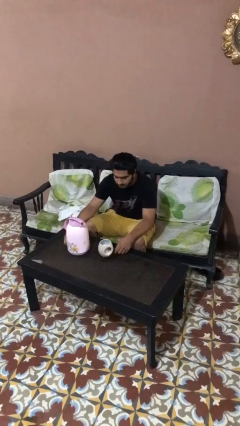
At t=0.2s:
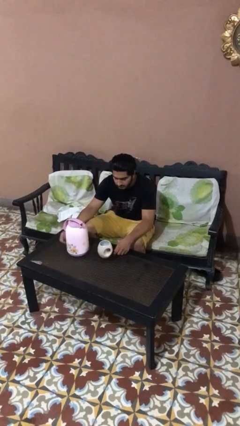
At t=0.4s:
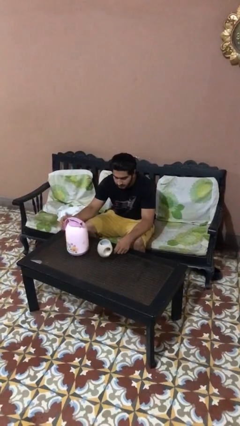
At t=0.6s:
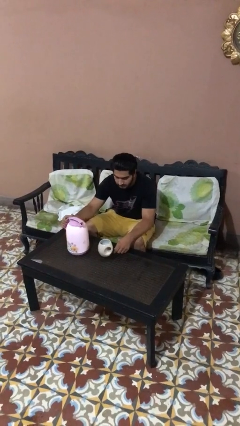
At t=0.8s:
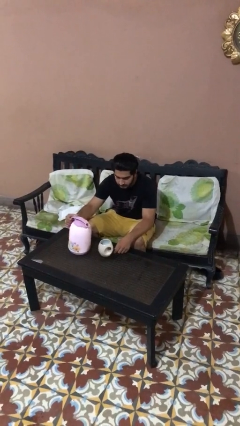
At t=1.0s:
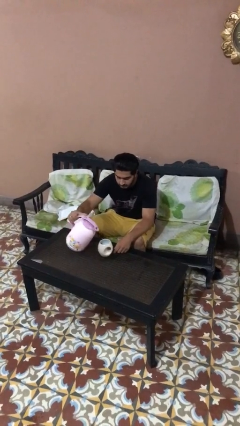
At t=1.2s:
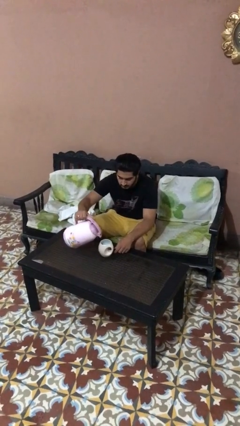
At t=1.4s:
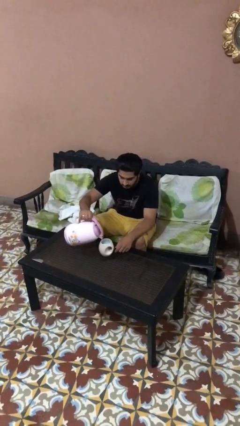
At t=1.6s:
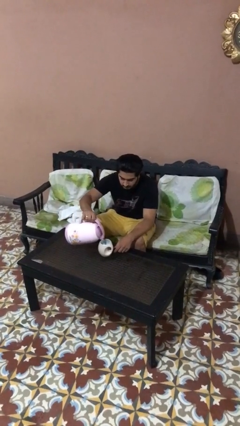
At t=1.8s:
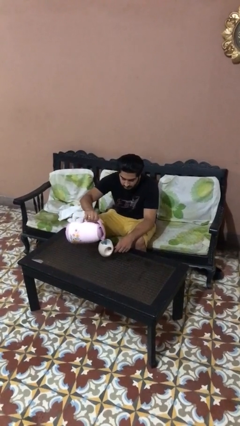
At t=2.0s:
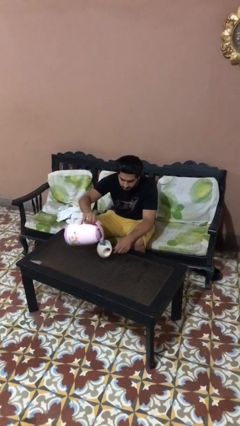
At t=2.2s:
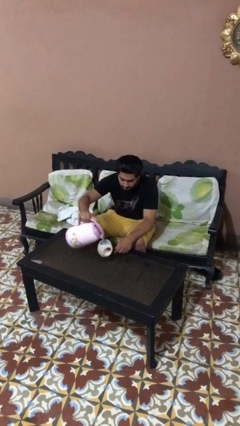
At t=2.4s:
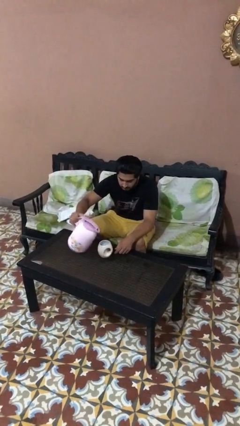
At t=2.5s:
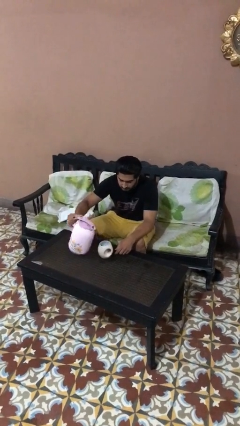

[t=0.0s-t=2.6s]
person pours coffee into mug

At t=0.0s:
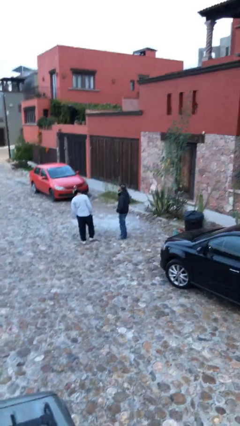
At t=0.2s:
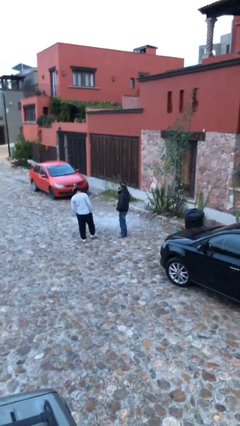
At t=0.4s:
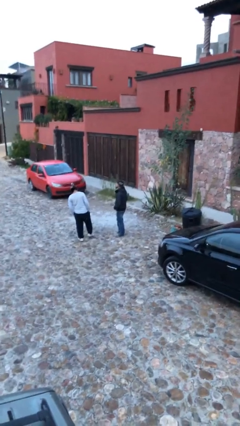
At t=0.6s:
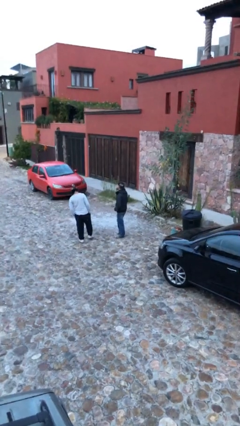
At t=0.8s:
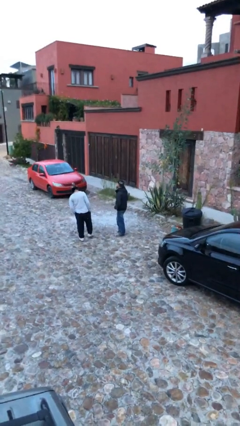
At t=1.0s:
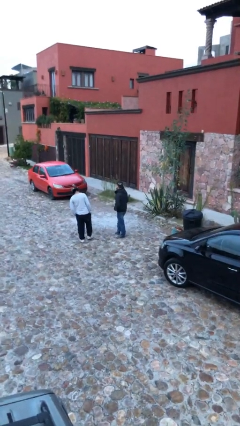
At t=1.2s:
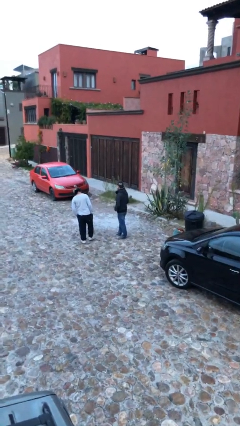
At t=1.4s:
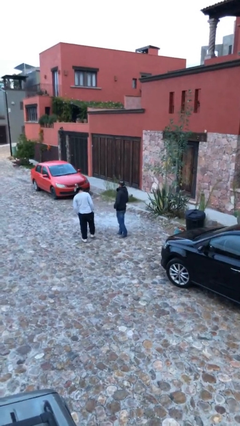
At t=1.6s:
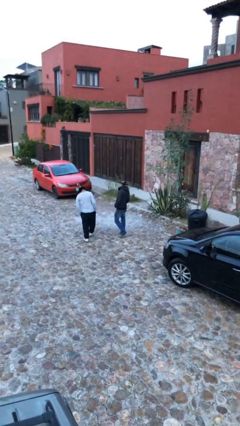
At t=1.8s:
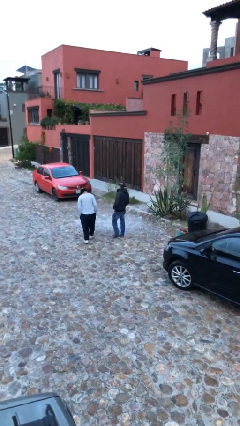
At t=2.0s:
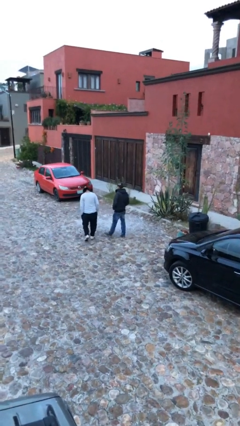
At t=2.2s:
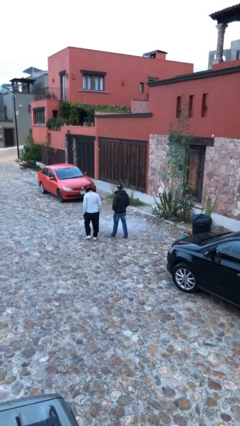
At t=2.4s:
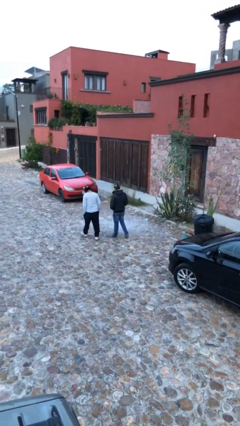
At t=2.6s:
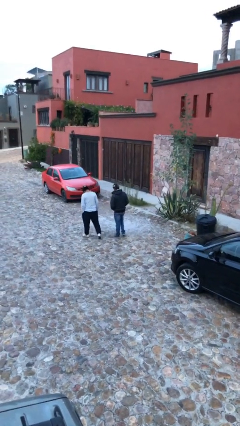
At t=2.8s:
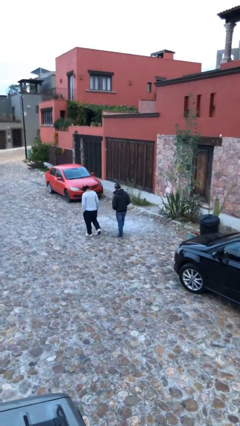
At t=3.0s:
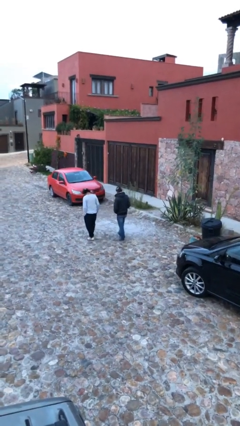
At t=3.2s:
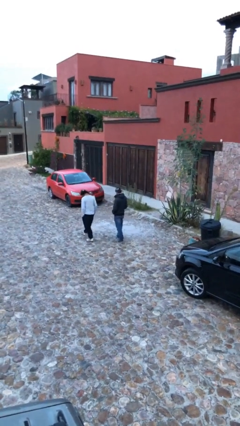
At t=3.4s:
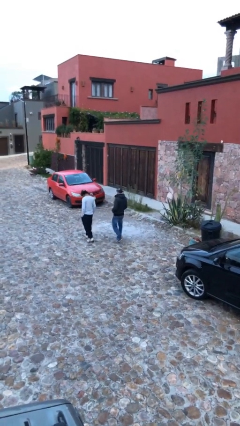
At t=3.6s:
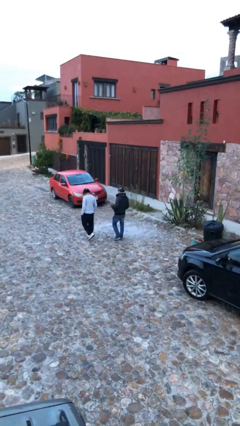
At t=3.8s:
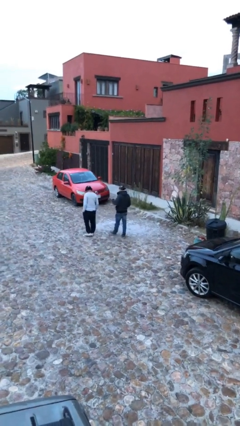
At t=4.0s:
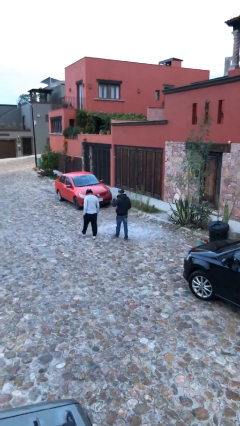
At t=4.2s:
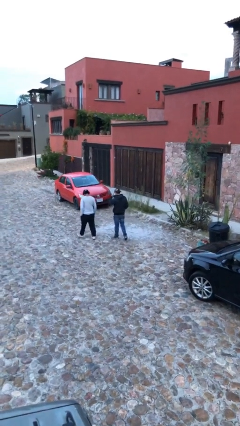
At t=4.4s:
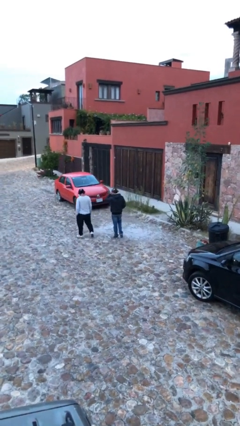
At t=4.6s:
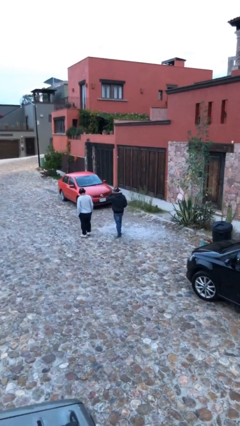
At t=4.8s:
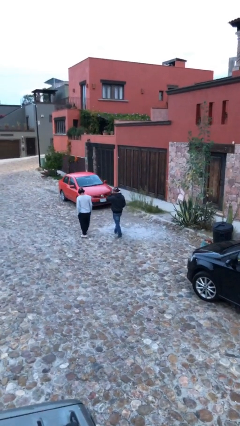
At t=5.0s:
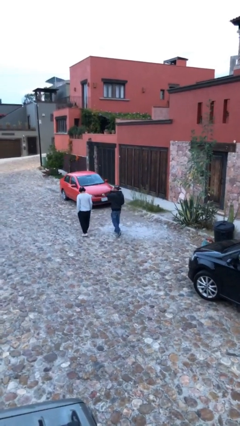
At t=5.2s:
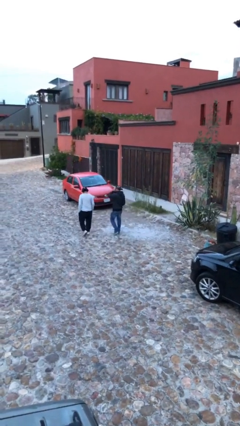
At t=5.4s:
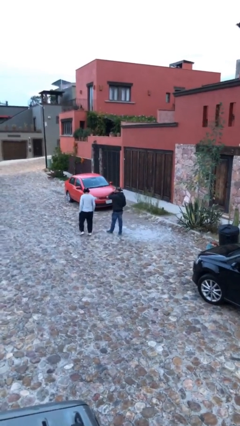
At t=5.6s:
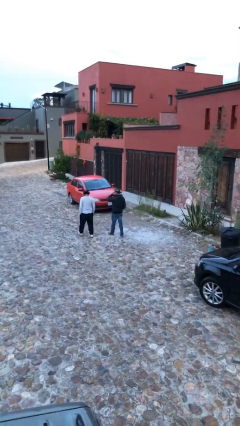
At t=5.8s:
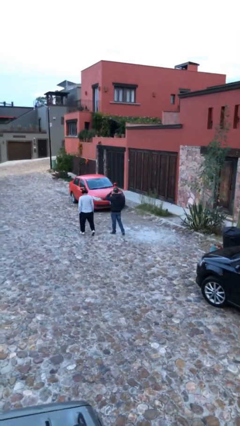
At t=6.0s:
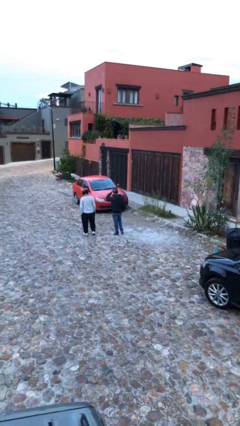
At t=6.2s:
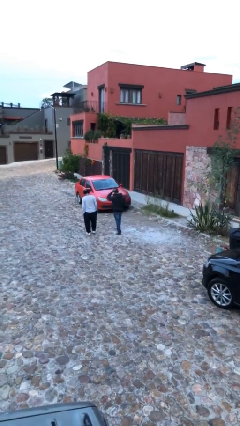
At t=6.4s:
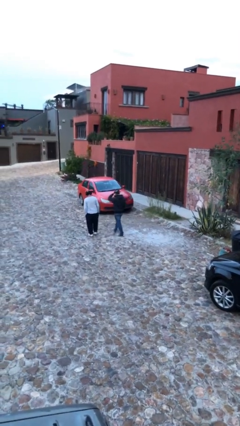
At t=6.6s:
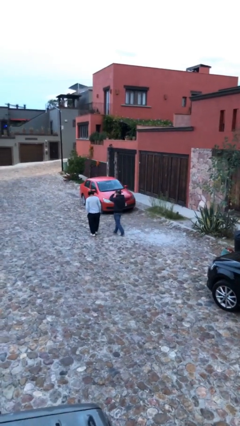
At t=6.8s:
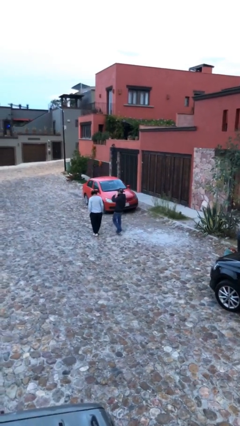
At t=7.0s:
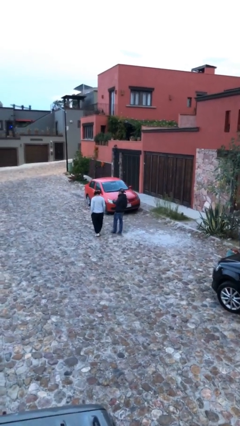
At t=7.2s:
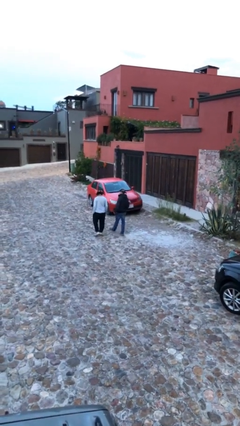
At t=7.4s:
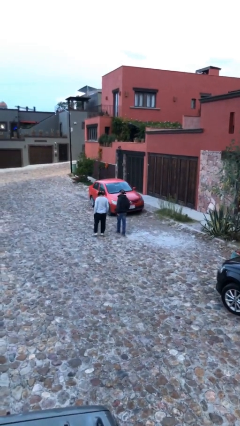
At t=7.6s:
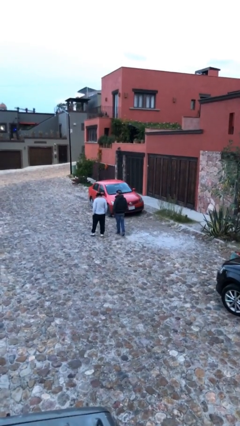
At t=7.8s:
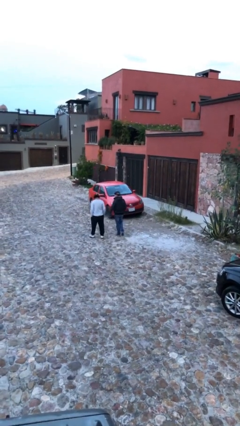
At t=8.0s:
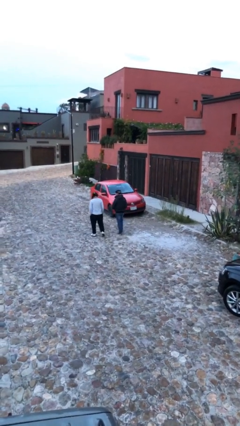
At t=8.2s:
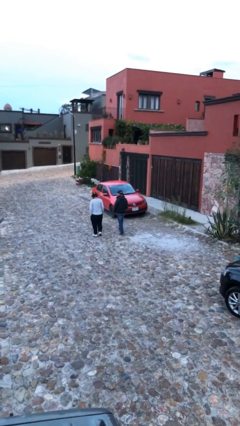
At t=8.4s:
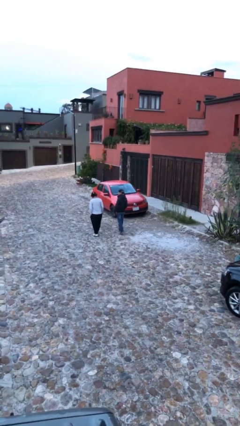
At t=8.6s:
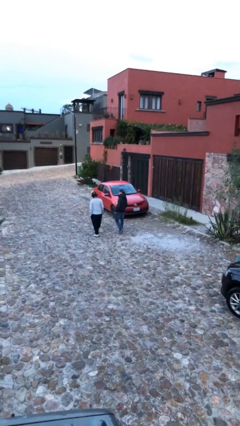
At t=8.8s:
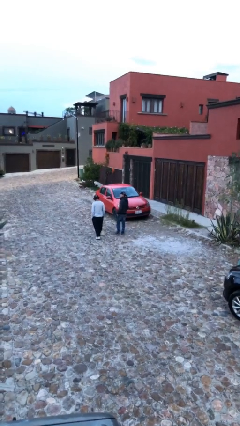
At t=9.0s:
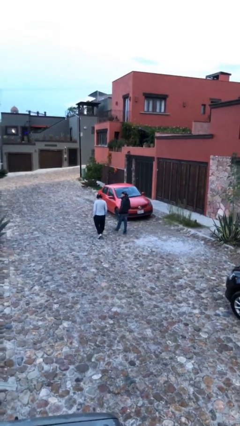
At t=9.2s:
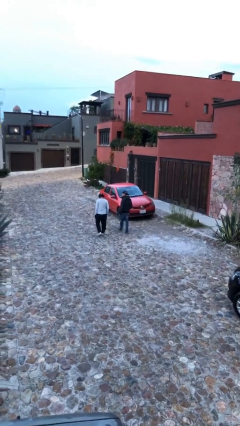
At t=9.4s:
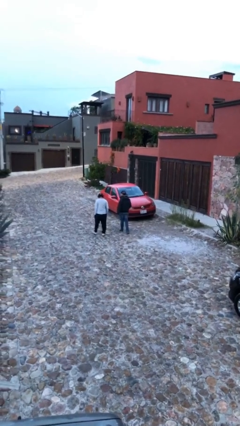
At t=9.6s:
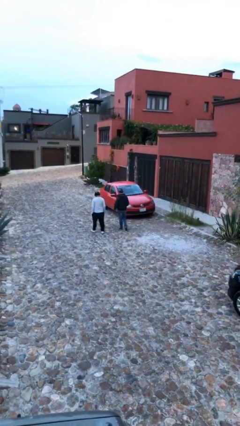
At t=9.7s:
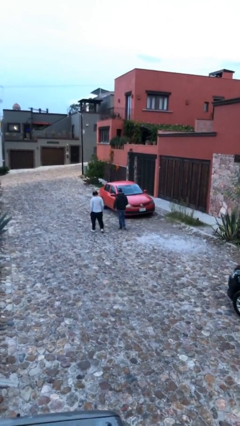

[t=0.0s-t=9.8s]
person talks to person

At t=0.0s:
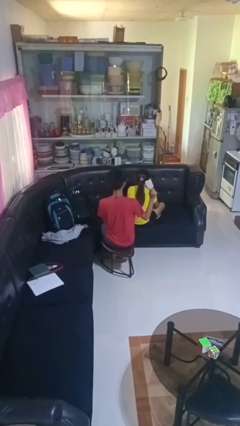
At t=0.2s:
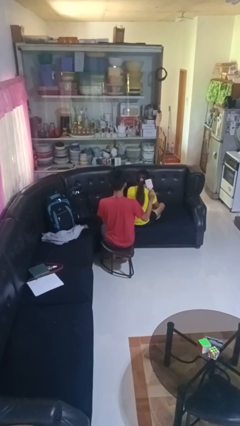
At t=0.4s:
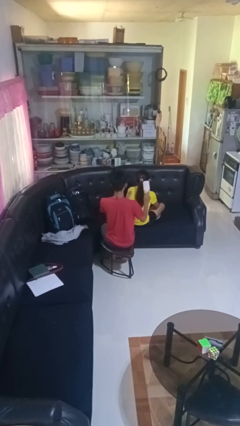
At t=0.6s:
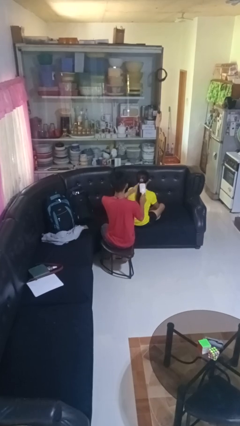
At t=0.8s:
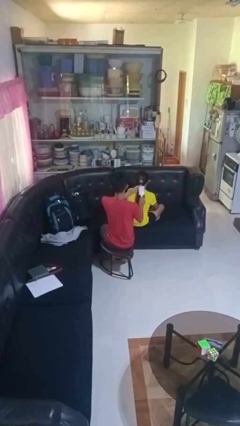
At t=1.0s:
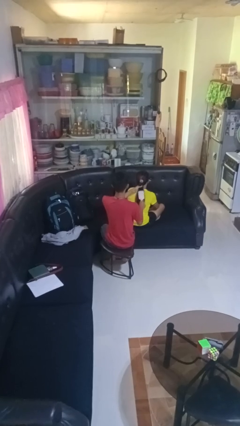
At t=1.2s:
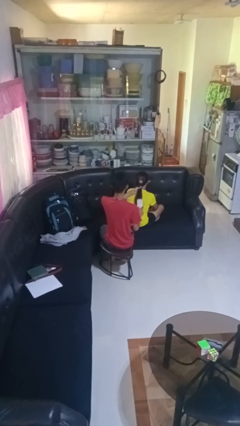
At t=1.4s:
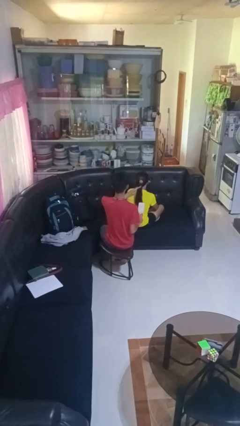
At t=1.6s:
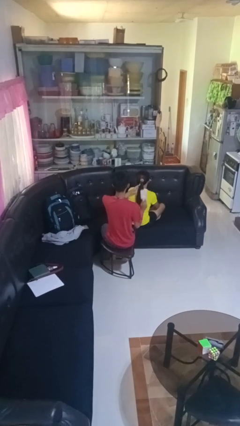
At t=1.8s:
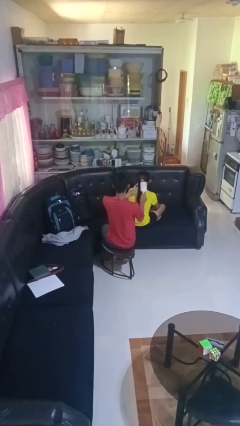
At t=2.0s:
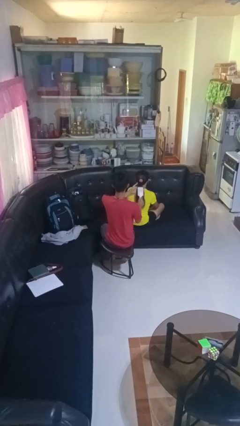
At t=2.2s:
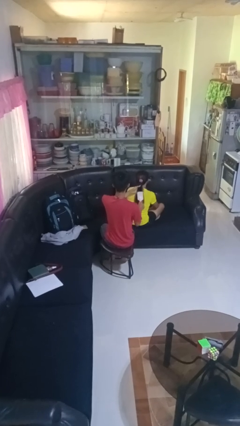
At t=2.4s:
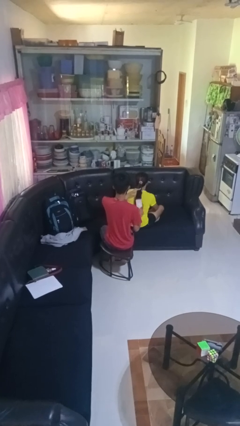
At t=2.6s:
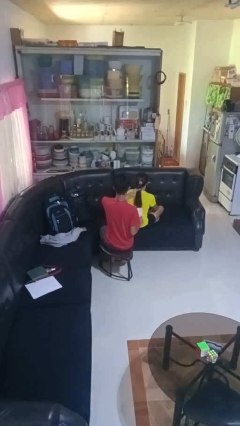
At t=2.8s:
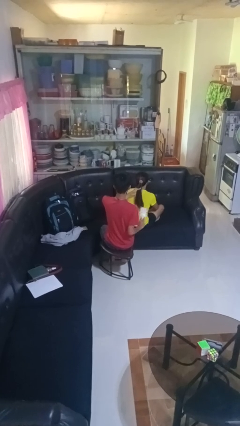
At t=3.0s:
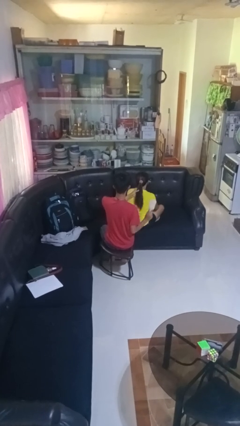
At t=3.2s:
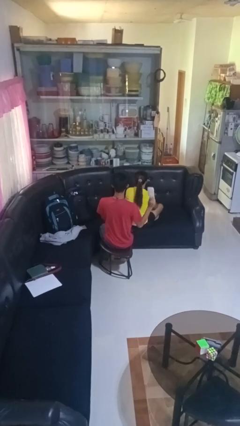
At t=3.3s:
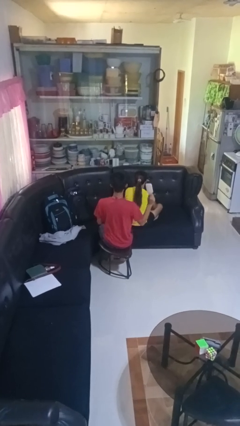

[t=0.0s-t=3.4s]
person brushes hair of person

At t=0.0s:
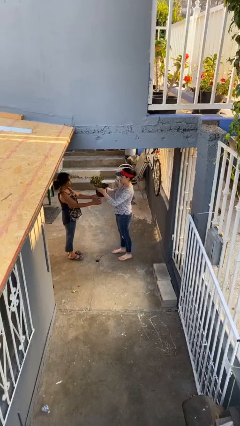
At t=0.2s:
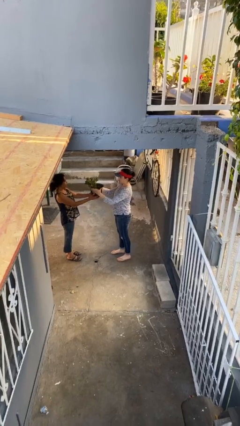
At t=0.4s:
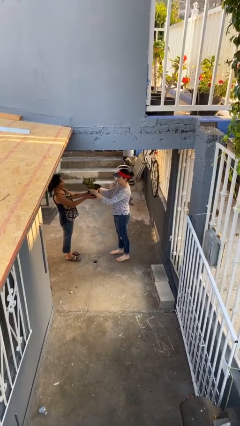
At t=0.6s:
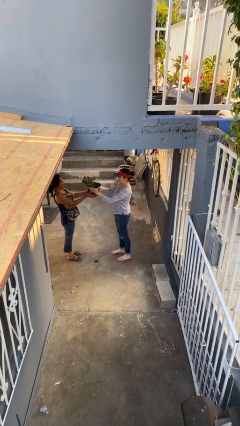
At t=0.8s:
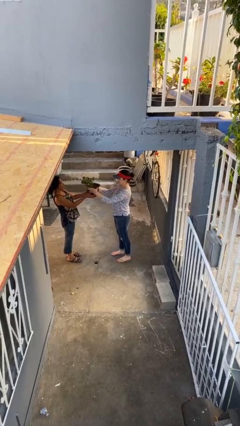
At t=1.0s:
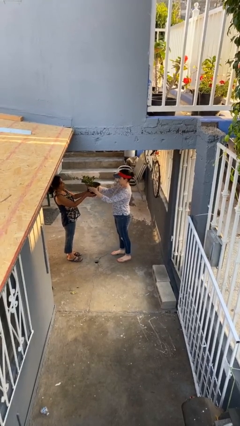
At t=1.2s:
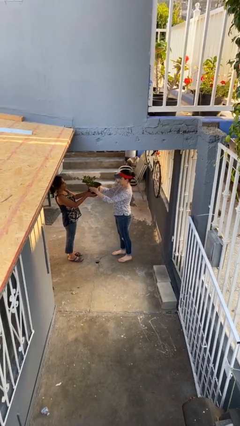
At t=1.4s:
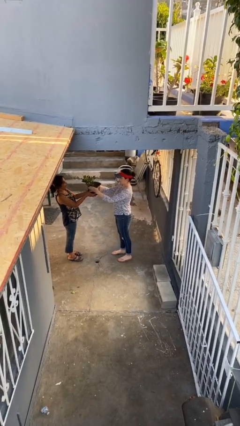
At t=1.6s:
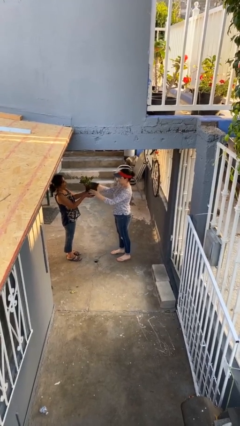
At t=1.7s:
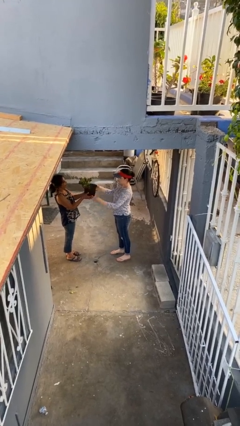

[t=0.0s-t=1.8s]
person transfers object to person
